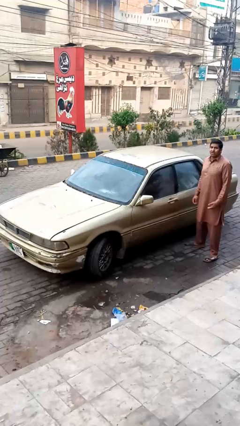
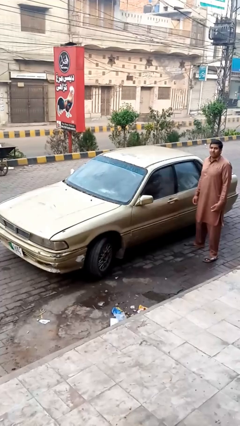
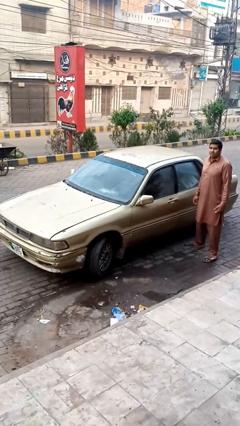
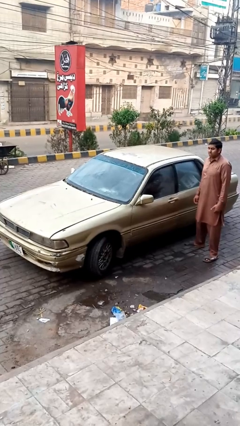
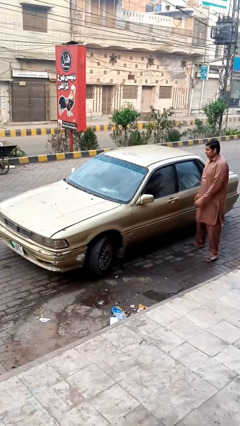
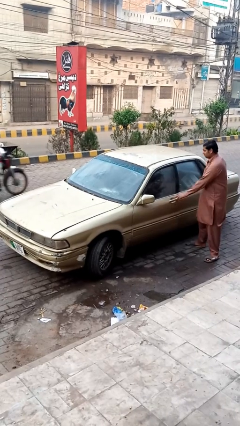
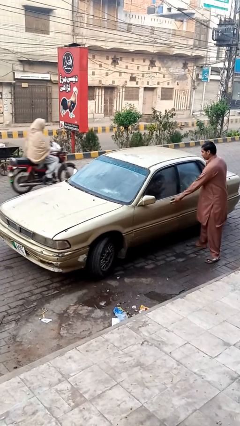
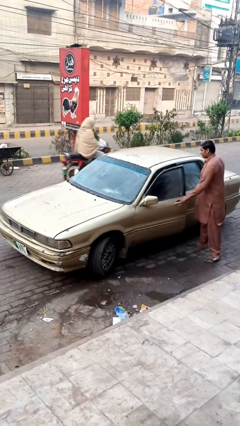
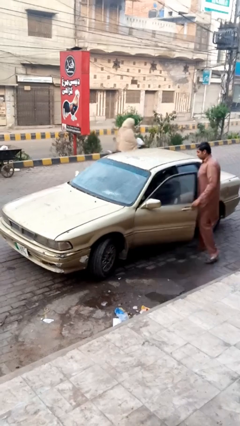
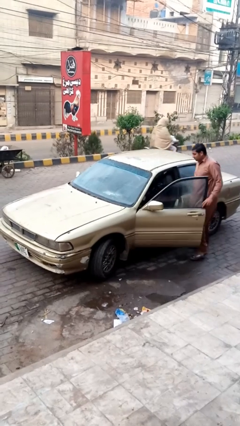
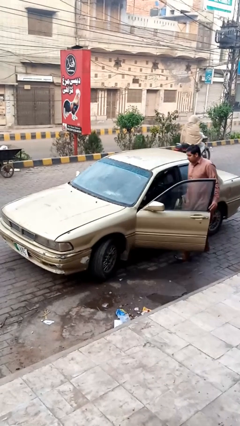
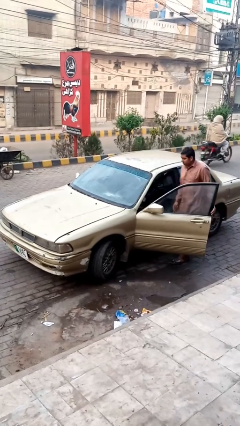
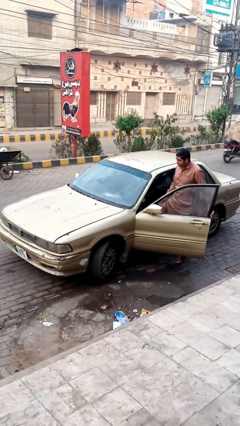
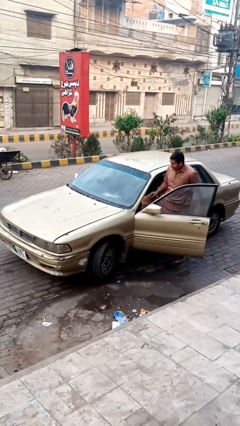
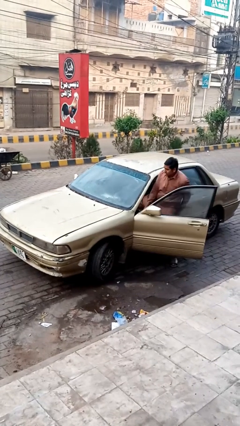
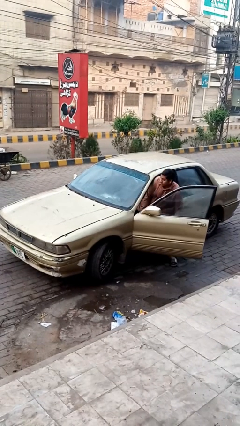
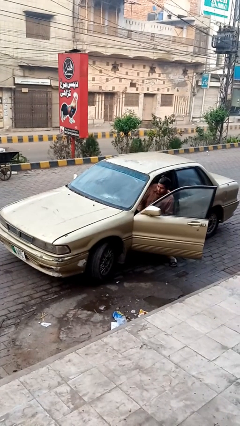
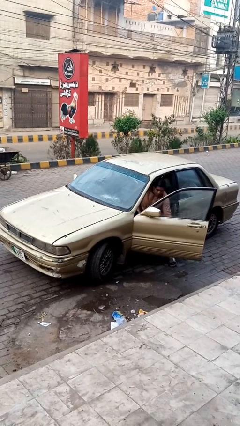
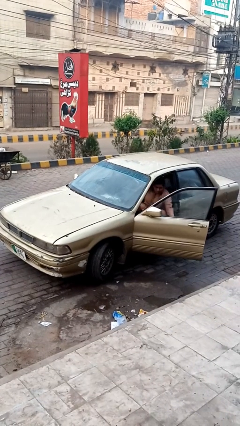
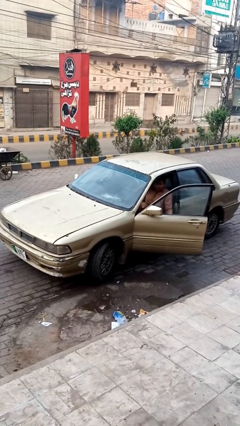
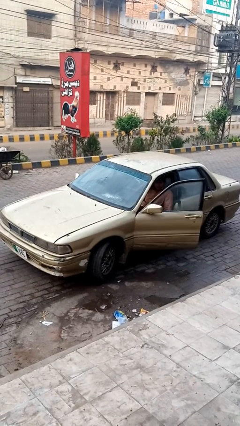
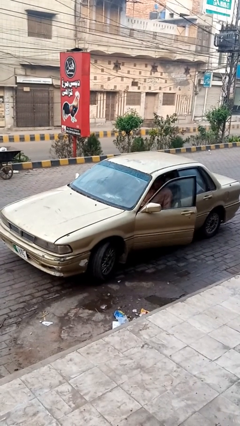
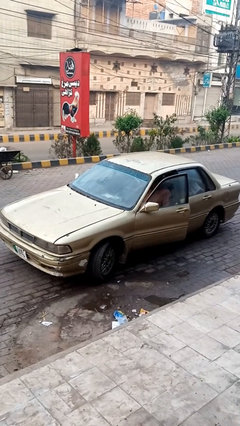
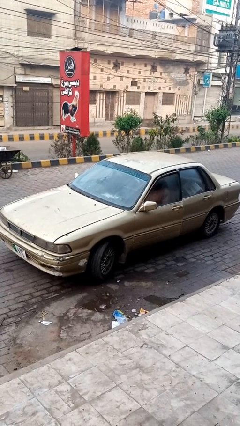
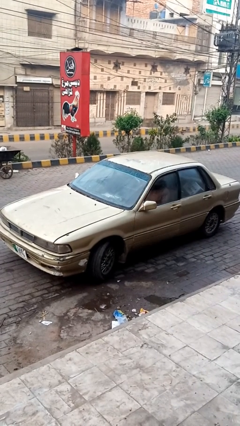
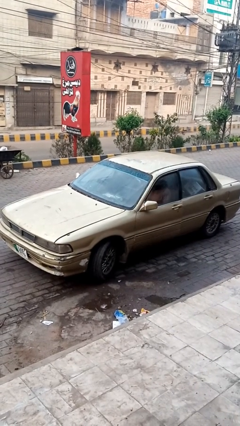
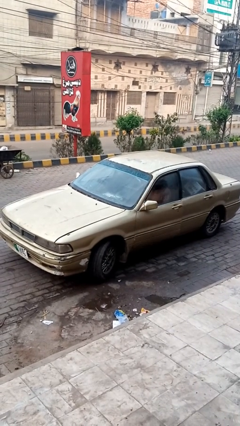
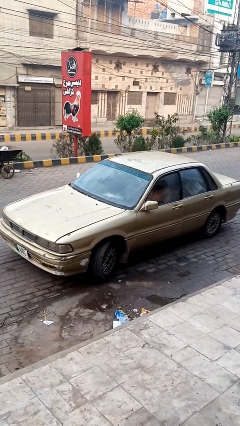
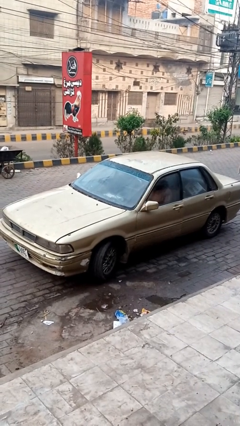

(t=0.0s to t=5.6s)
car picks up person

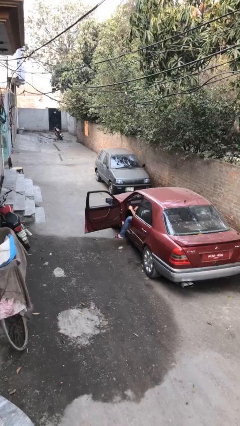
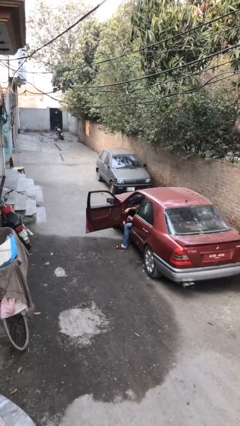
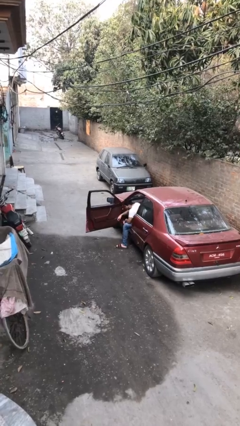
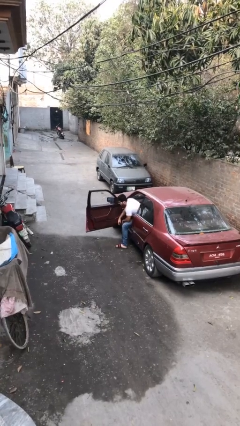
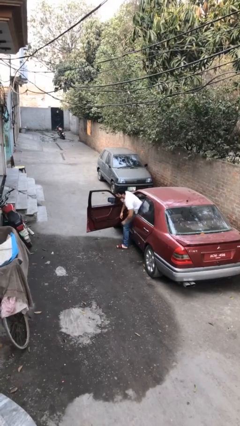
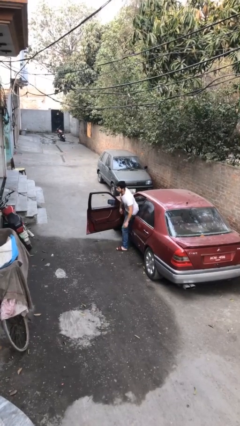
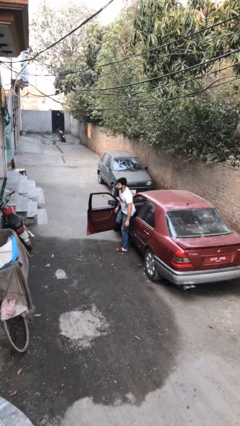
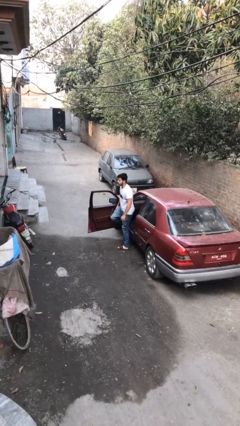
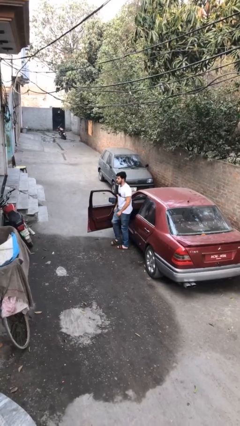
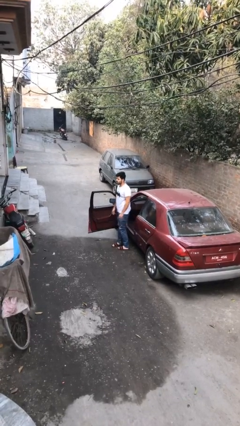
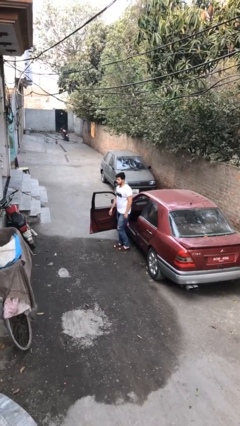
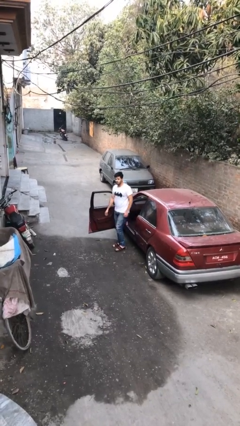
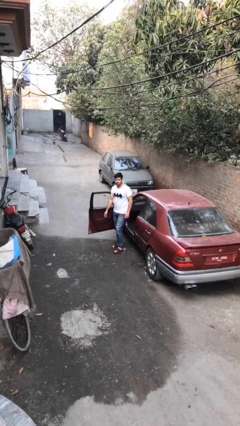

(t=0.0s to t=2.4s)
person exits car

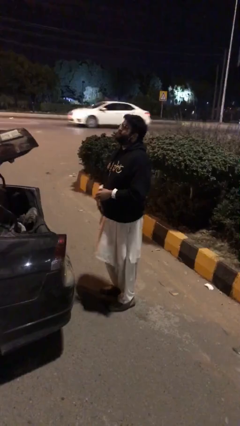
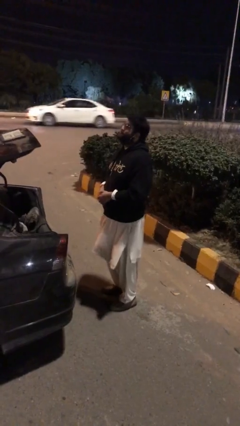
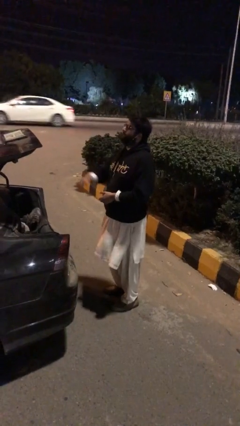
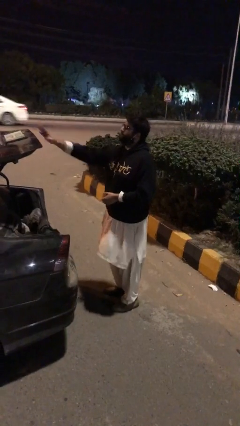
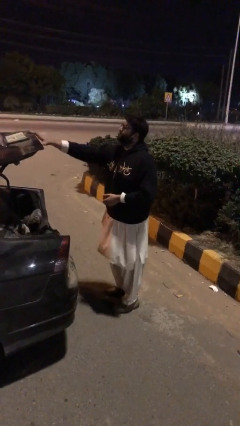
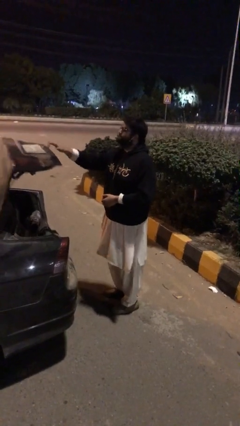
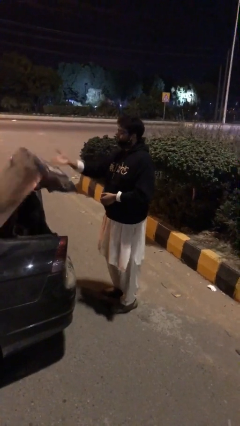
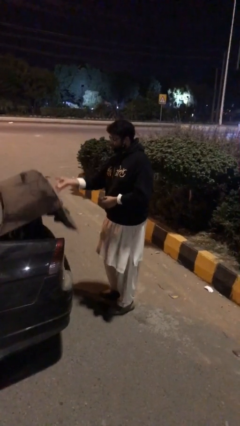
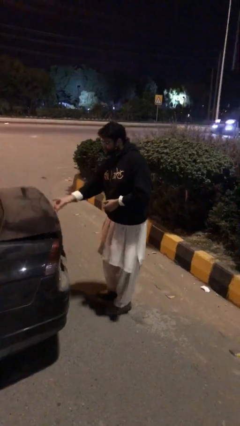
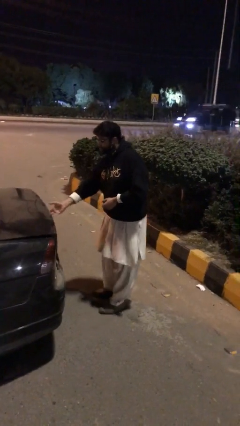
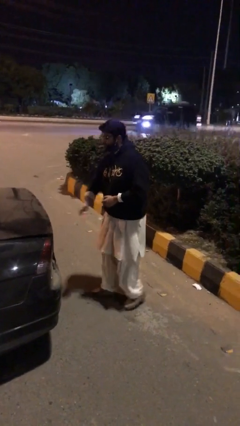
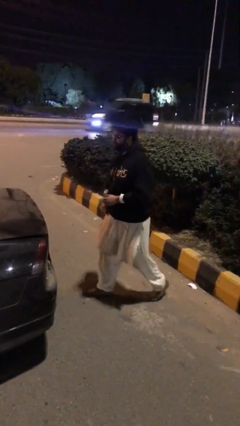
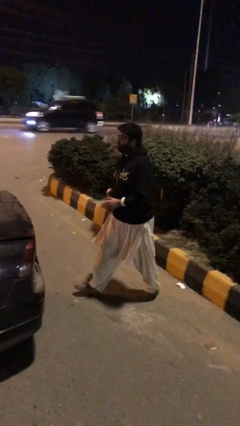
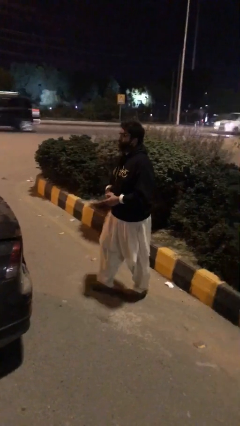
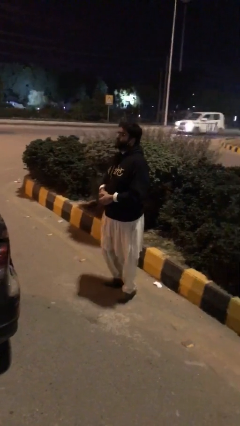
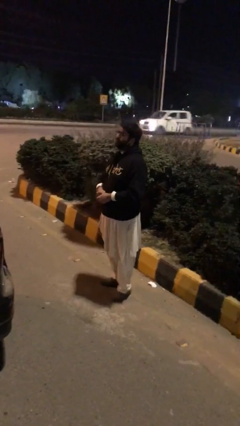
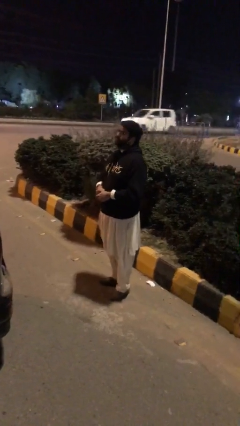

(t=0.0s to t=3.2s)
person closes car trunk

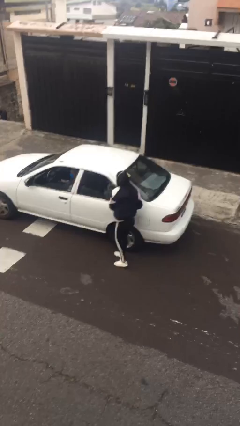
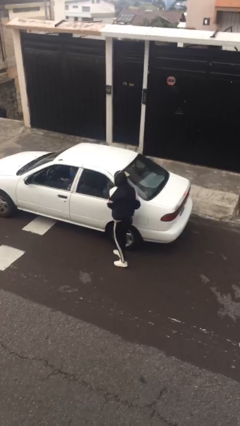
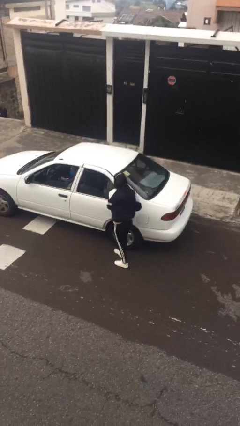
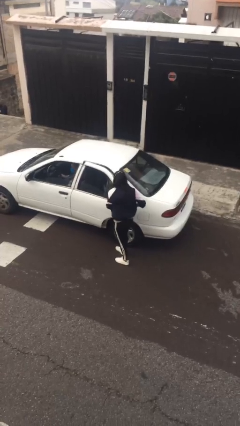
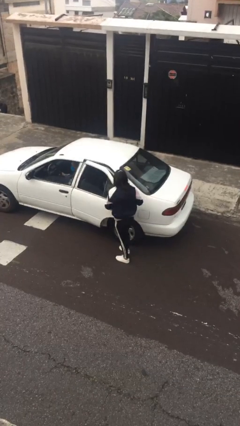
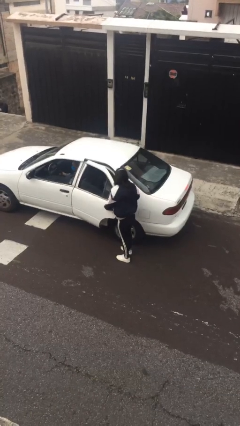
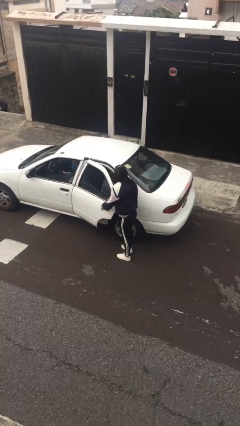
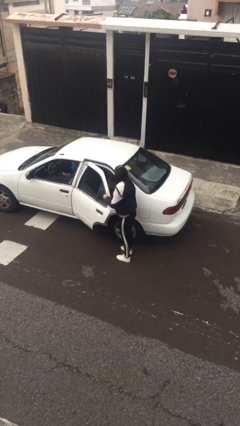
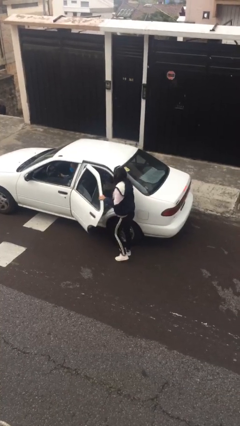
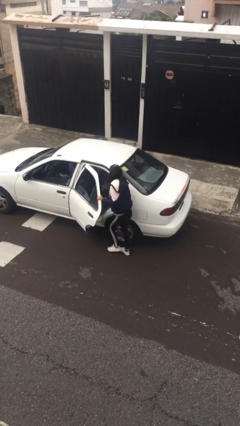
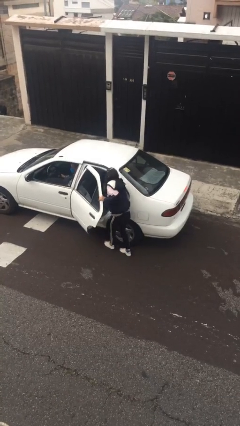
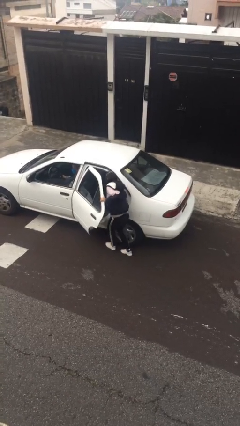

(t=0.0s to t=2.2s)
person opens car door

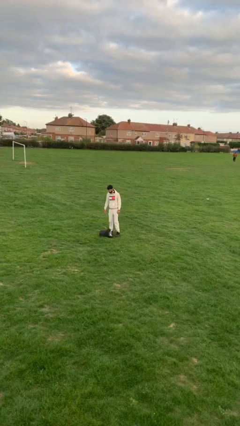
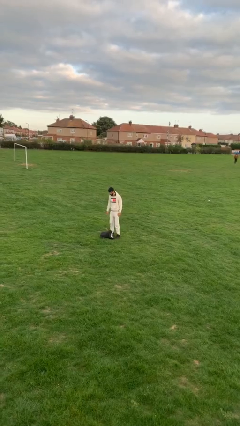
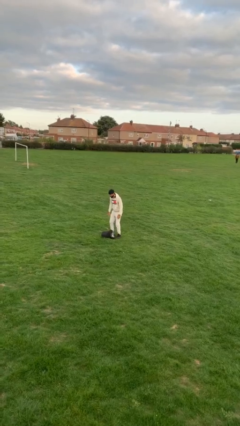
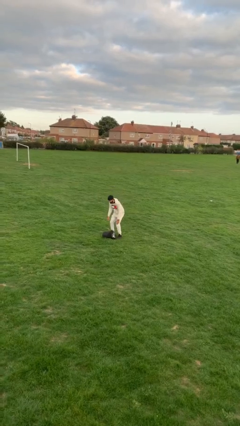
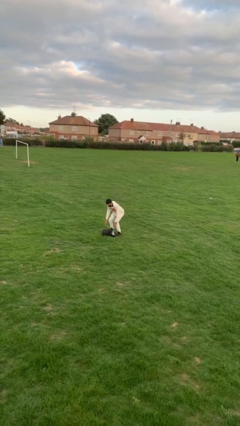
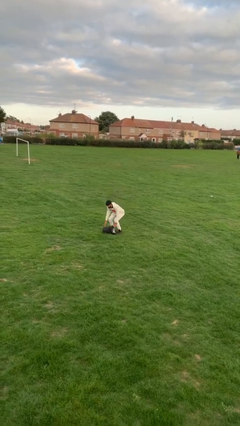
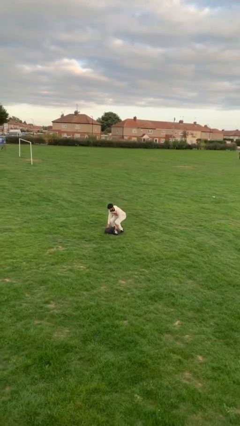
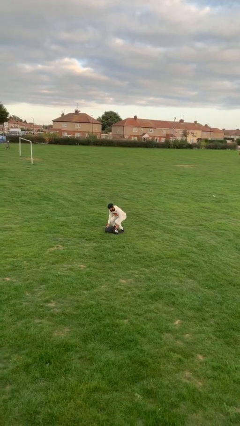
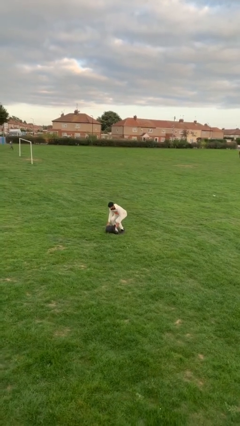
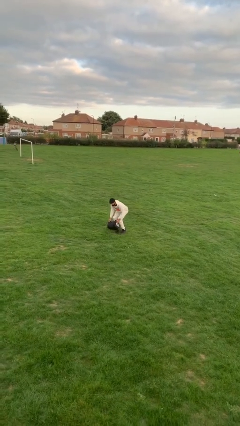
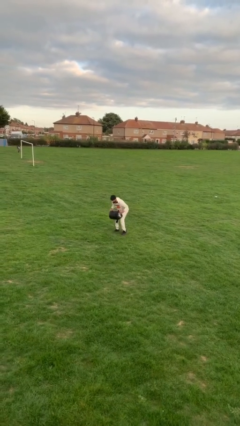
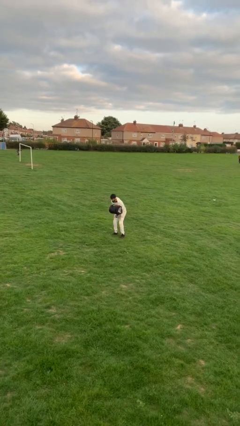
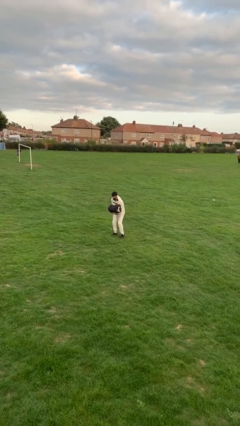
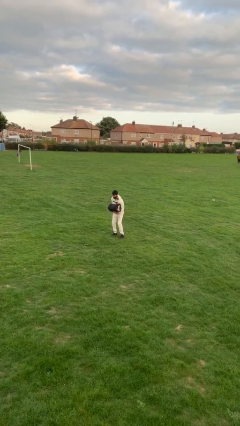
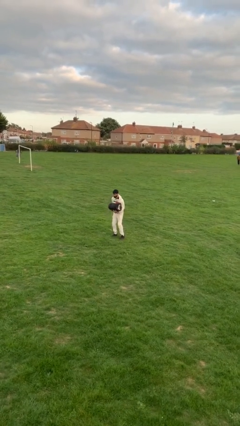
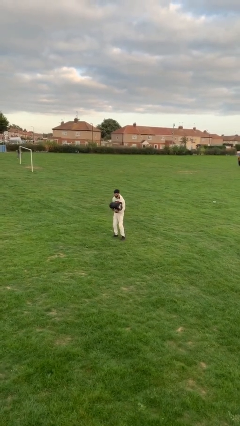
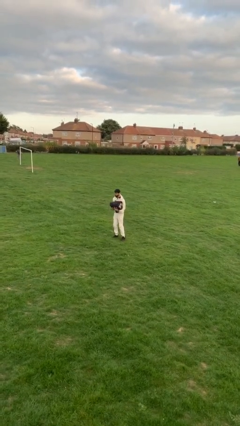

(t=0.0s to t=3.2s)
person picks up object from floor

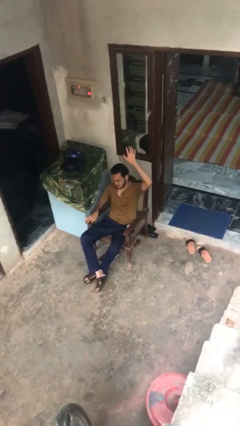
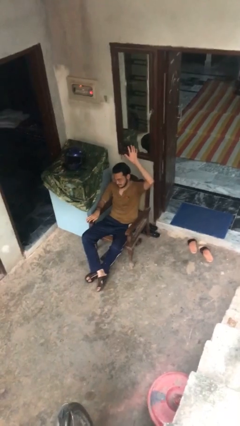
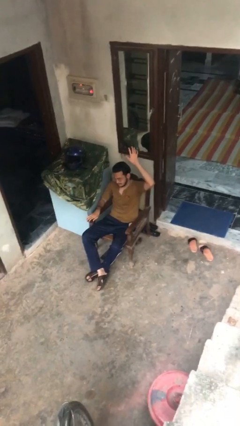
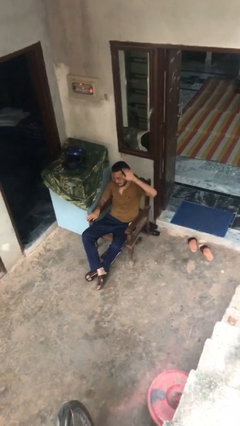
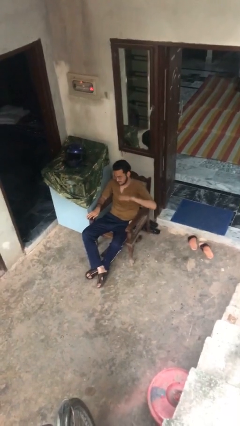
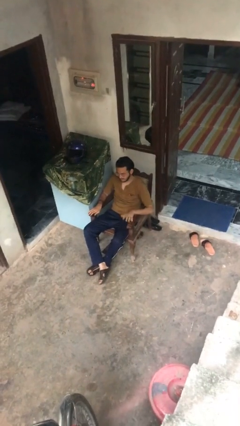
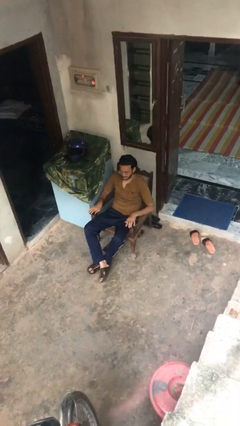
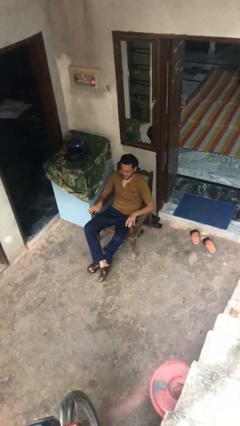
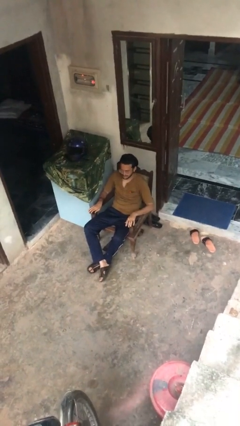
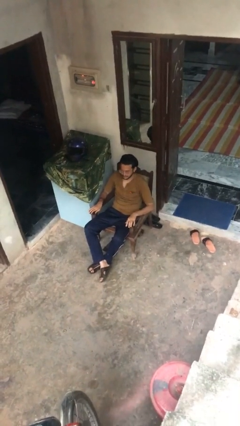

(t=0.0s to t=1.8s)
person gestures lower hand
